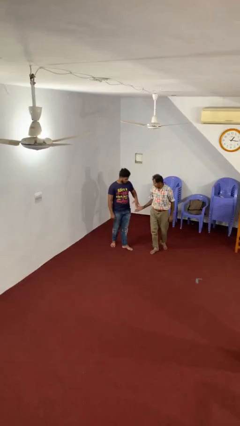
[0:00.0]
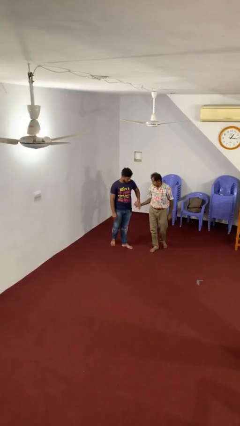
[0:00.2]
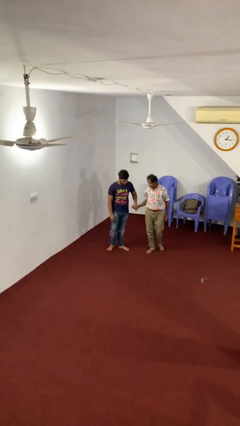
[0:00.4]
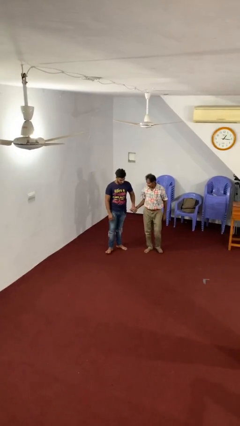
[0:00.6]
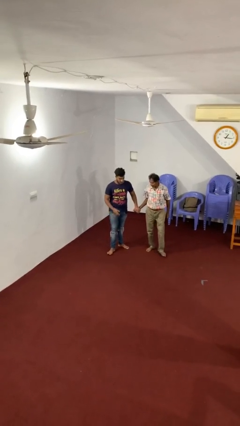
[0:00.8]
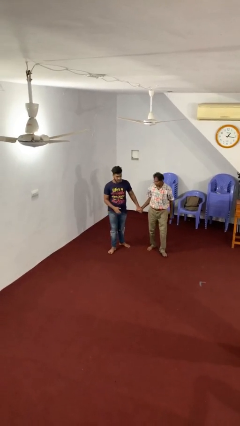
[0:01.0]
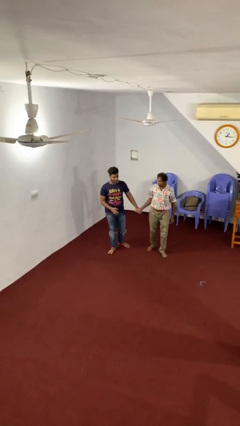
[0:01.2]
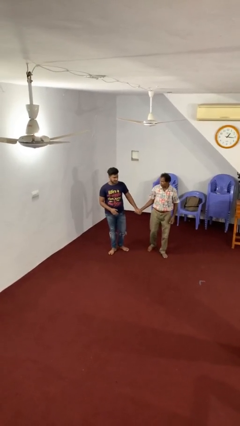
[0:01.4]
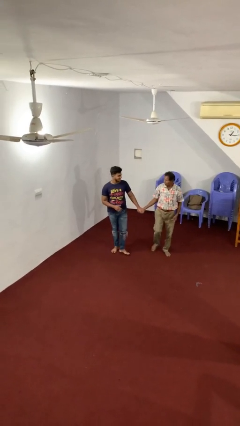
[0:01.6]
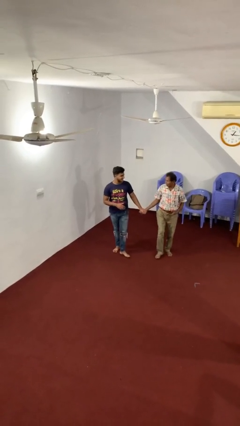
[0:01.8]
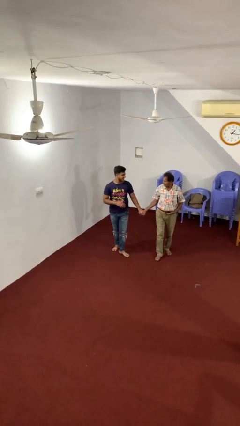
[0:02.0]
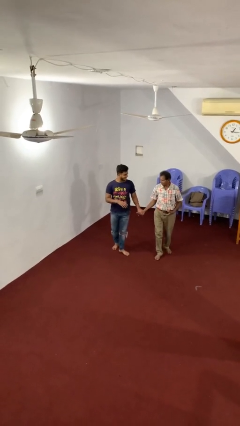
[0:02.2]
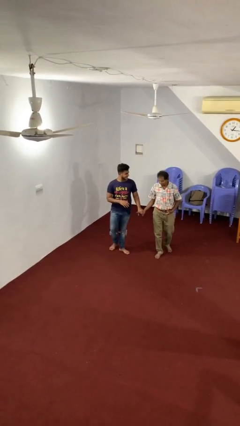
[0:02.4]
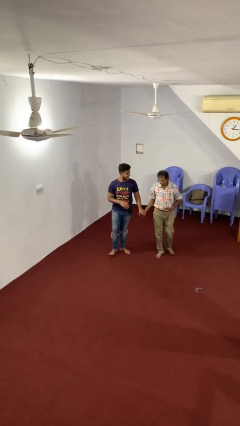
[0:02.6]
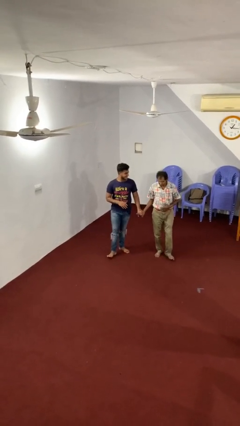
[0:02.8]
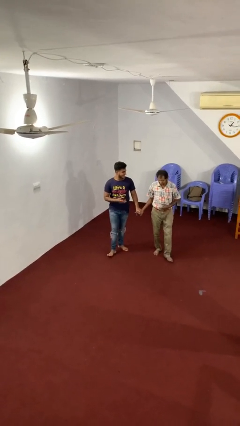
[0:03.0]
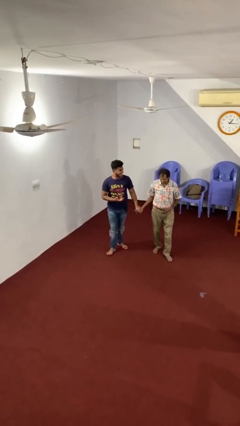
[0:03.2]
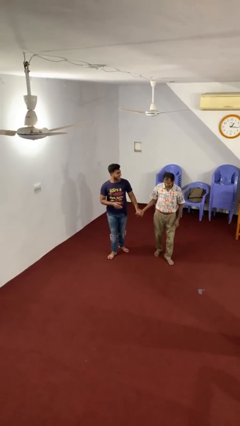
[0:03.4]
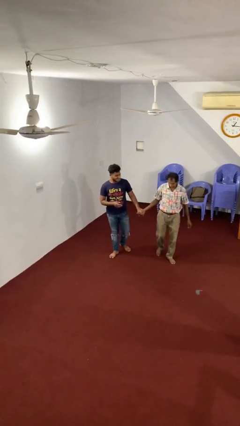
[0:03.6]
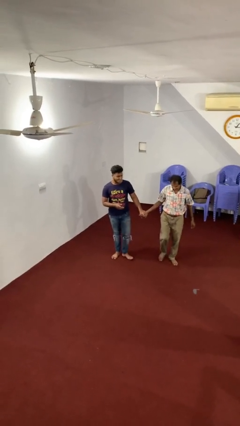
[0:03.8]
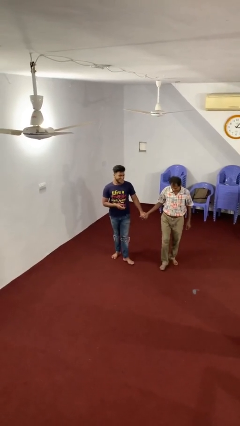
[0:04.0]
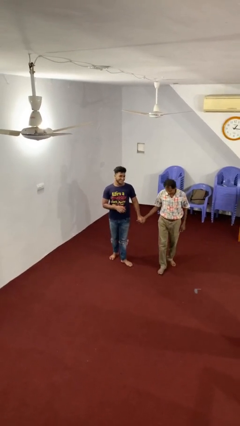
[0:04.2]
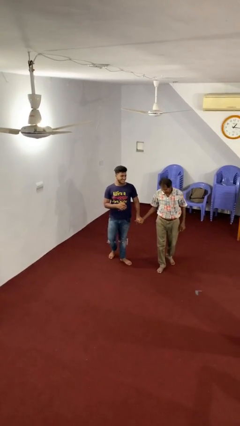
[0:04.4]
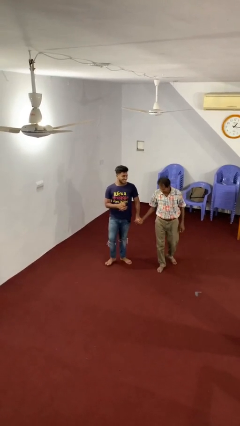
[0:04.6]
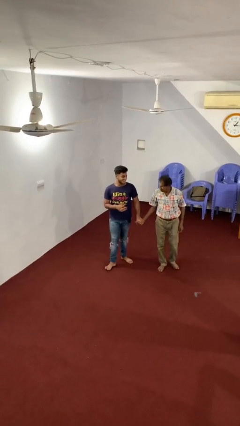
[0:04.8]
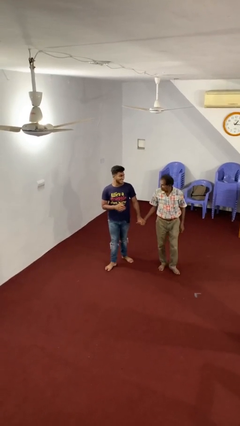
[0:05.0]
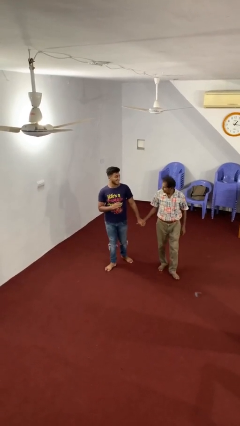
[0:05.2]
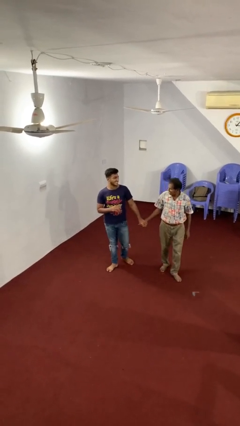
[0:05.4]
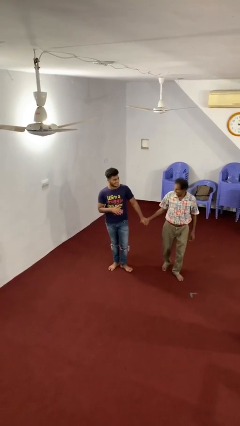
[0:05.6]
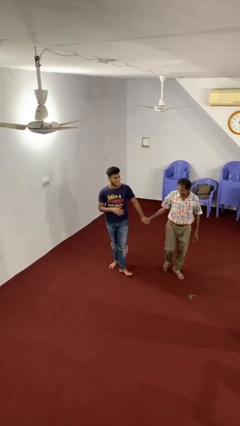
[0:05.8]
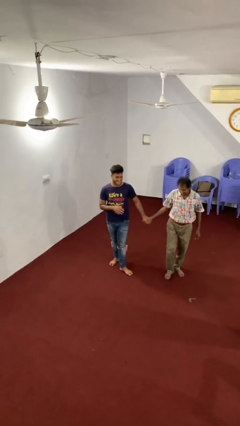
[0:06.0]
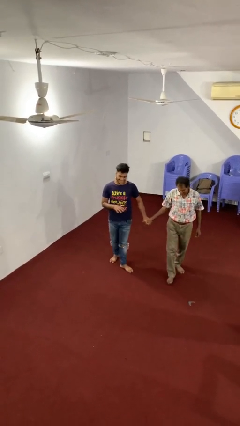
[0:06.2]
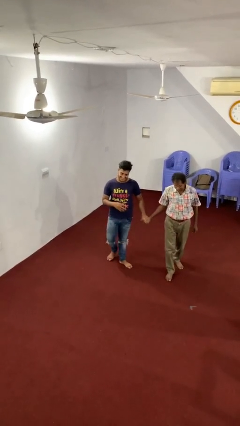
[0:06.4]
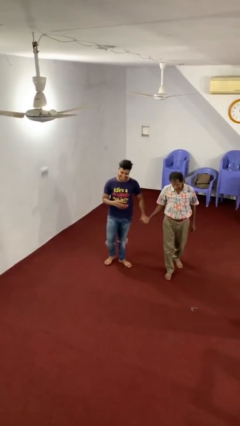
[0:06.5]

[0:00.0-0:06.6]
person holds hand

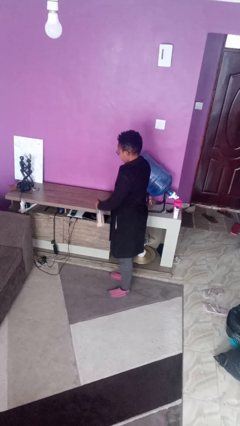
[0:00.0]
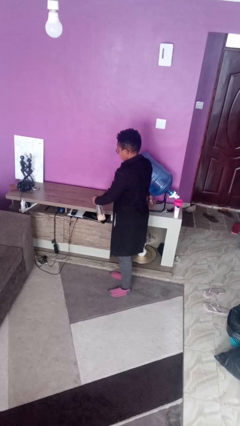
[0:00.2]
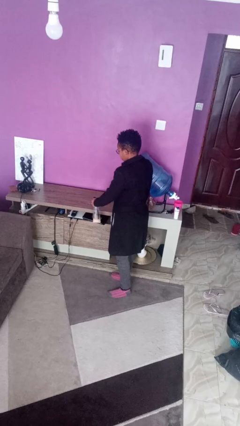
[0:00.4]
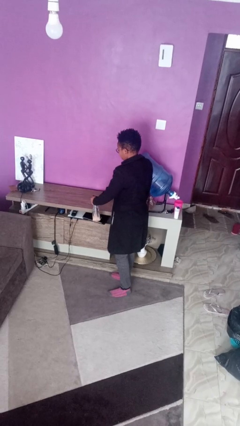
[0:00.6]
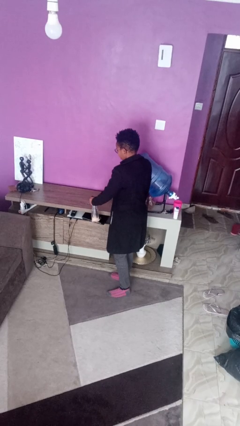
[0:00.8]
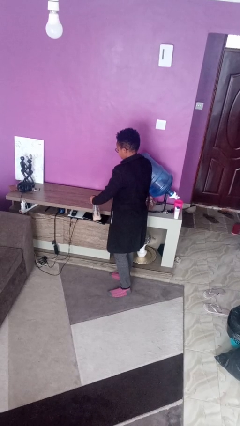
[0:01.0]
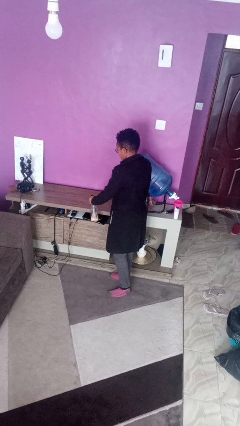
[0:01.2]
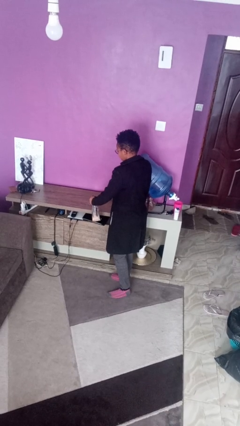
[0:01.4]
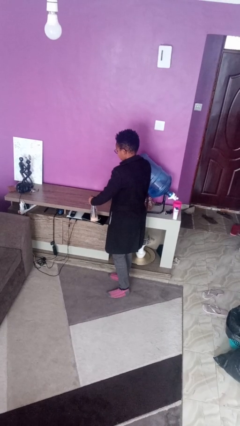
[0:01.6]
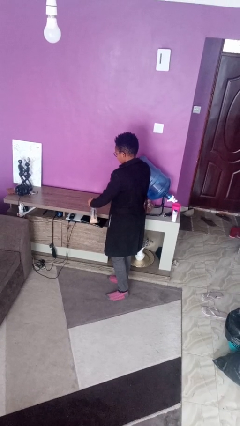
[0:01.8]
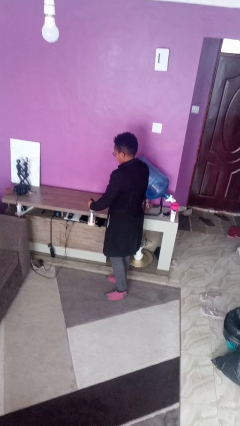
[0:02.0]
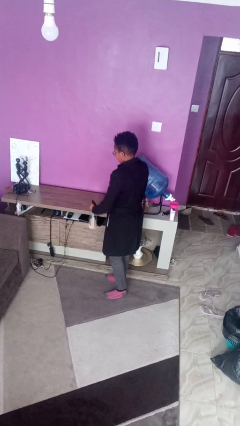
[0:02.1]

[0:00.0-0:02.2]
person sprays from bottle

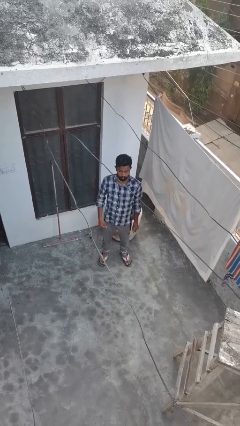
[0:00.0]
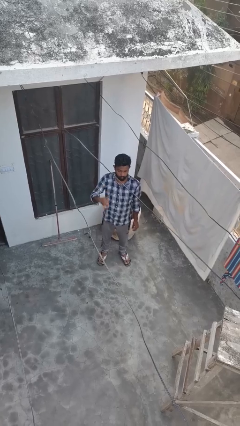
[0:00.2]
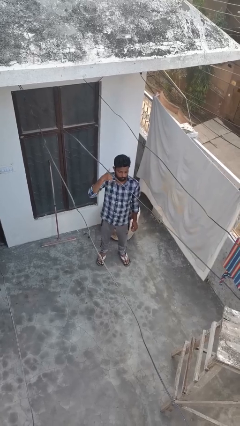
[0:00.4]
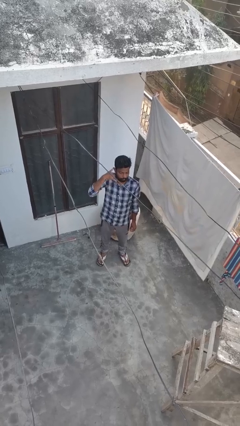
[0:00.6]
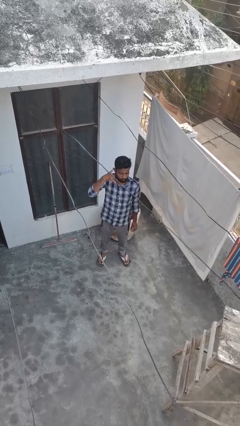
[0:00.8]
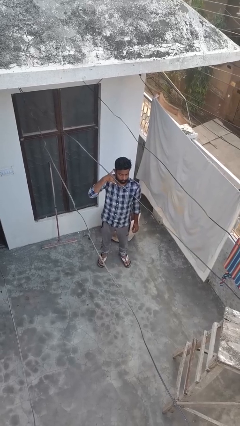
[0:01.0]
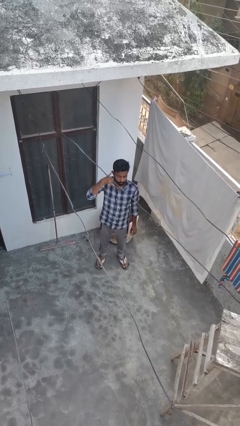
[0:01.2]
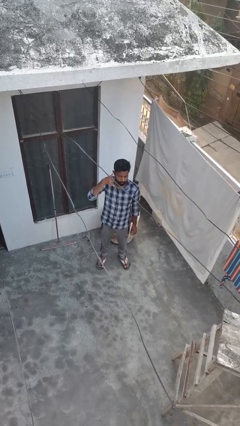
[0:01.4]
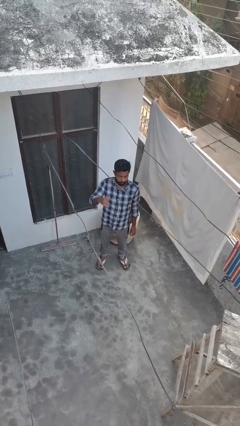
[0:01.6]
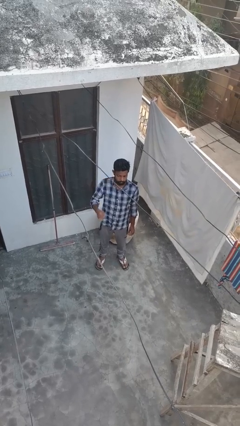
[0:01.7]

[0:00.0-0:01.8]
person gestures call me

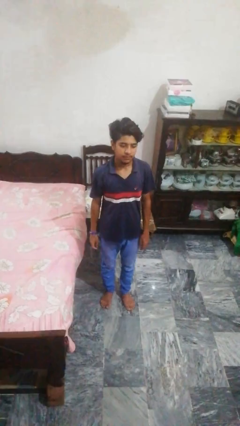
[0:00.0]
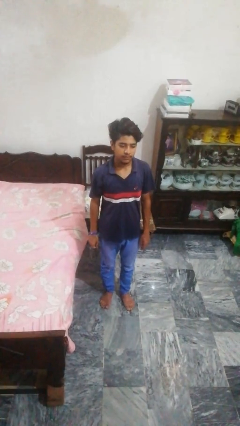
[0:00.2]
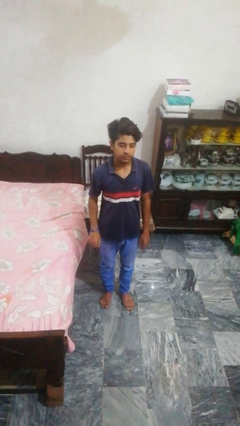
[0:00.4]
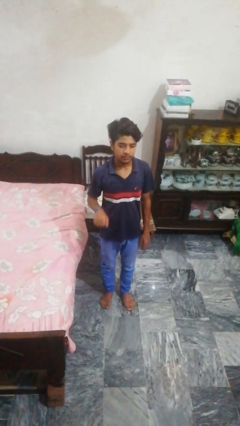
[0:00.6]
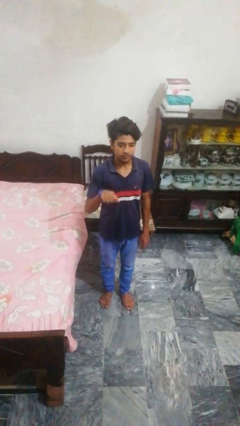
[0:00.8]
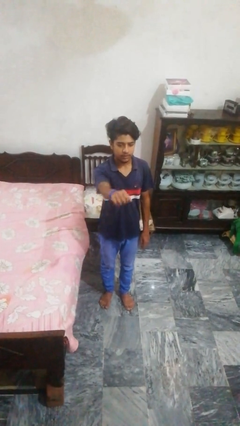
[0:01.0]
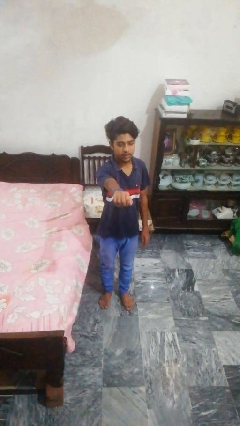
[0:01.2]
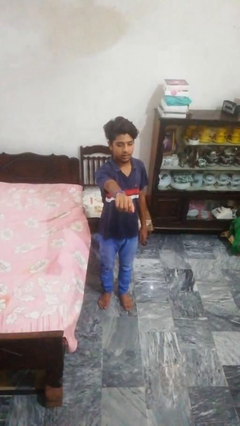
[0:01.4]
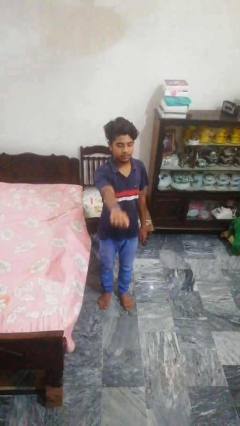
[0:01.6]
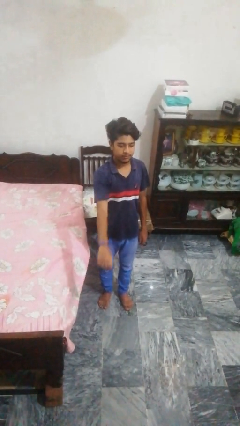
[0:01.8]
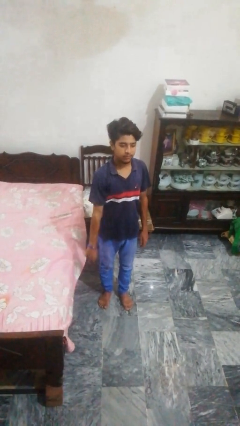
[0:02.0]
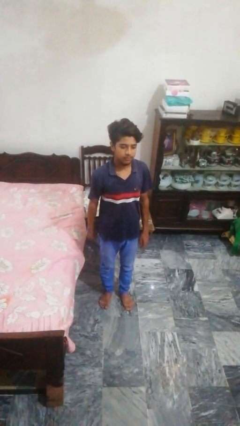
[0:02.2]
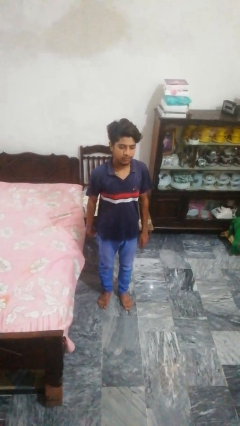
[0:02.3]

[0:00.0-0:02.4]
person punches

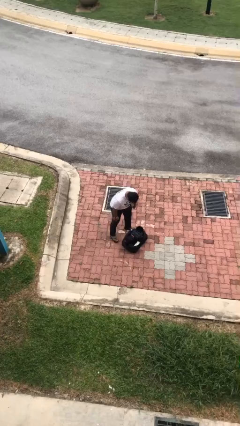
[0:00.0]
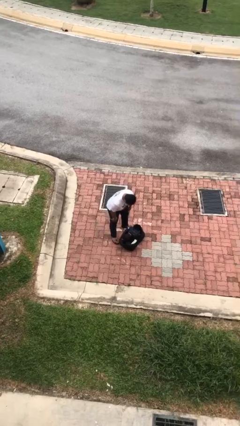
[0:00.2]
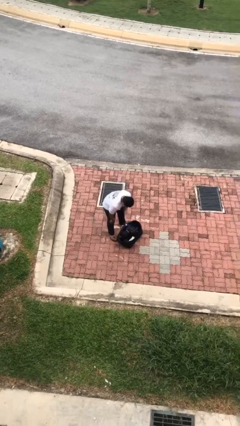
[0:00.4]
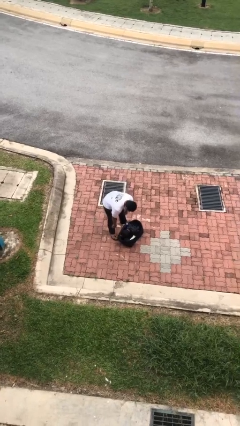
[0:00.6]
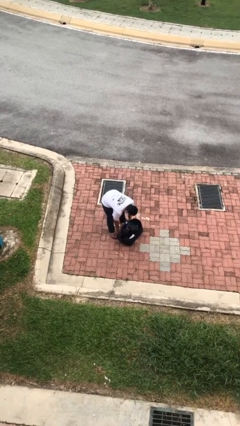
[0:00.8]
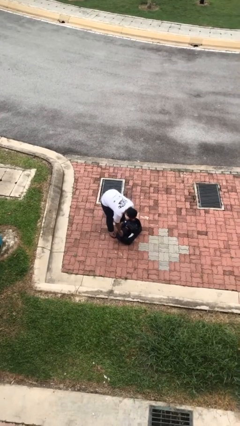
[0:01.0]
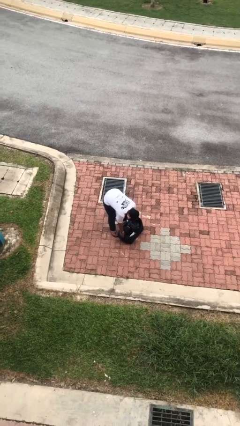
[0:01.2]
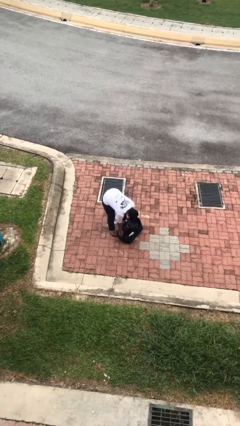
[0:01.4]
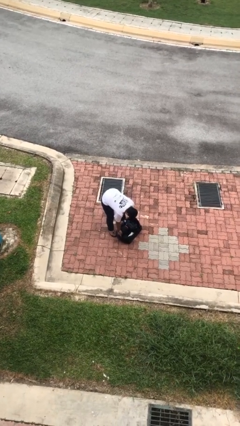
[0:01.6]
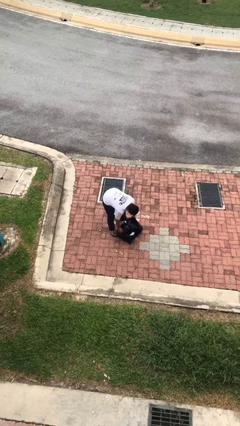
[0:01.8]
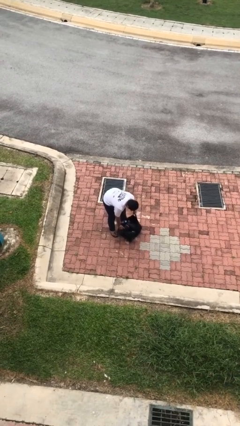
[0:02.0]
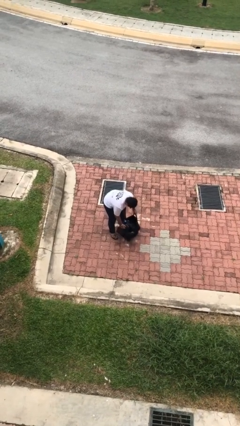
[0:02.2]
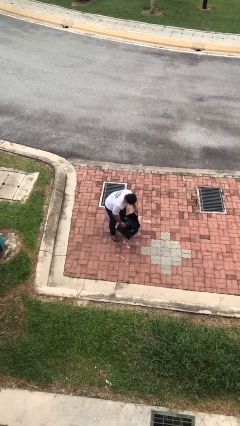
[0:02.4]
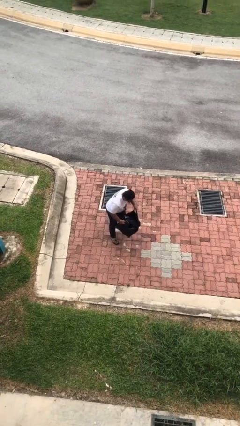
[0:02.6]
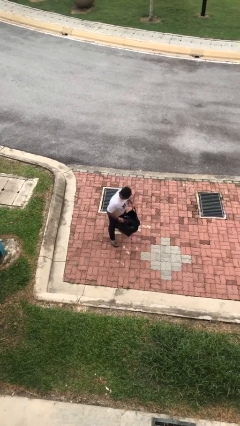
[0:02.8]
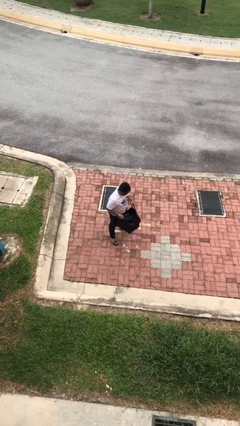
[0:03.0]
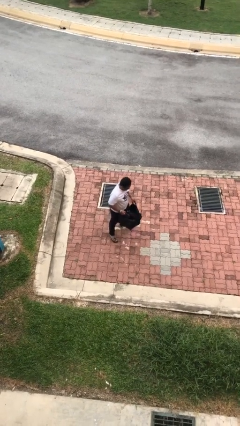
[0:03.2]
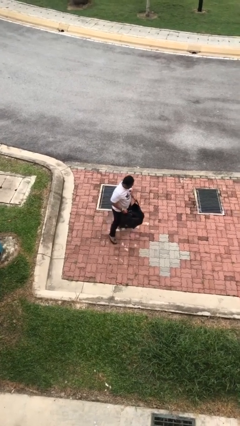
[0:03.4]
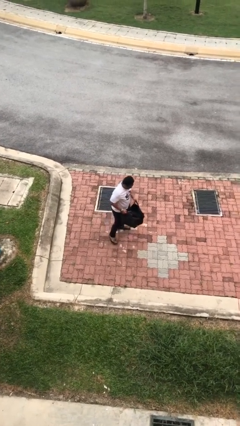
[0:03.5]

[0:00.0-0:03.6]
person picks up object from floor

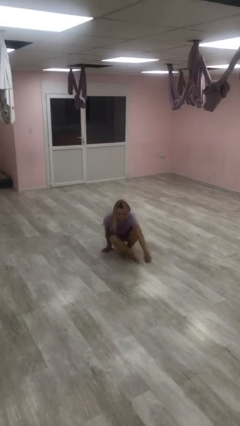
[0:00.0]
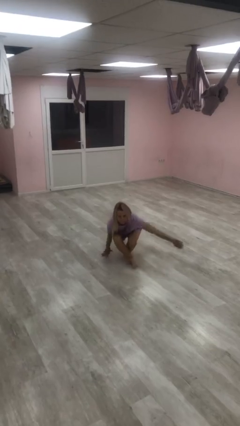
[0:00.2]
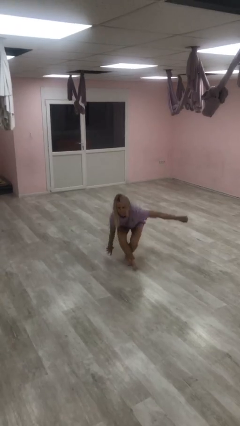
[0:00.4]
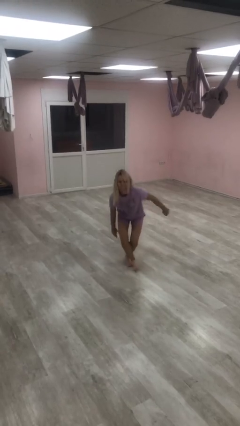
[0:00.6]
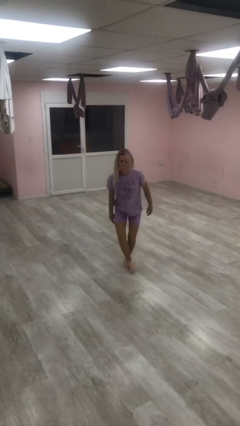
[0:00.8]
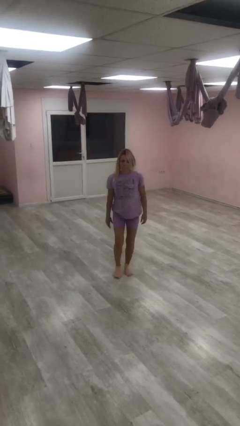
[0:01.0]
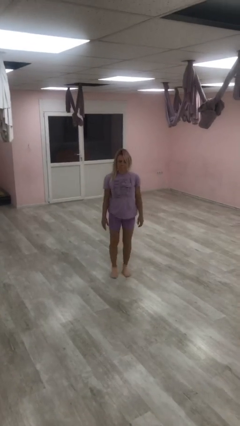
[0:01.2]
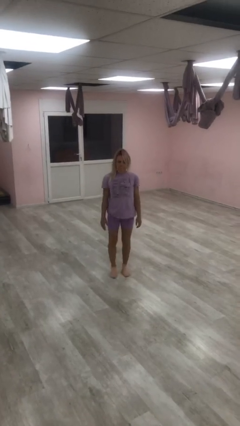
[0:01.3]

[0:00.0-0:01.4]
person stands up from floor
